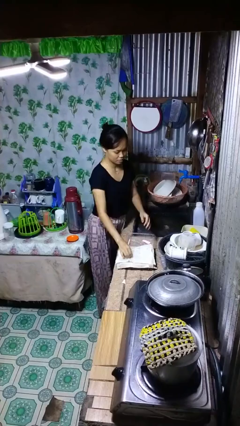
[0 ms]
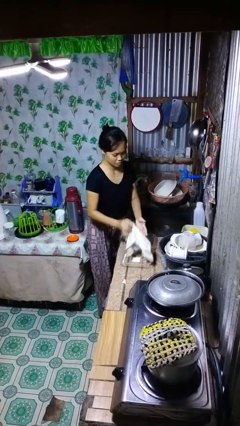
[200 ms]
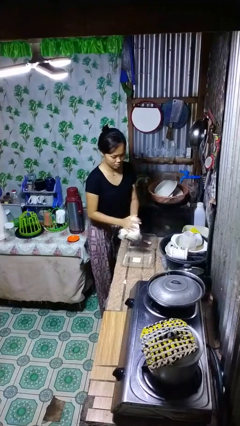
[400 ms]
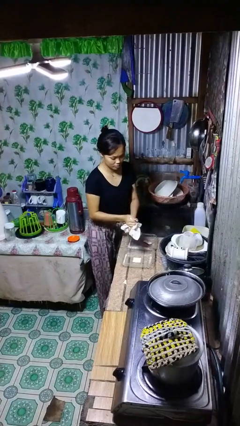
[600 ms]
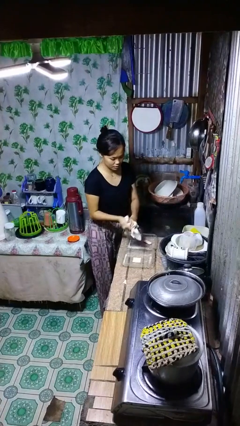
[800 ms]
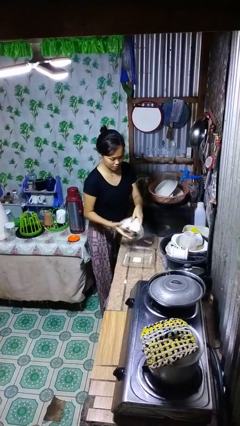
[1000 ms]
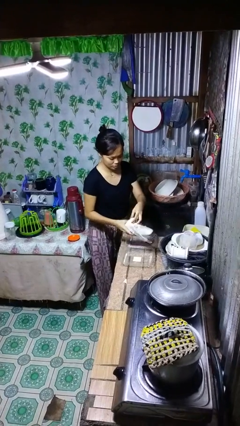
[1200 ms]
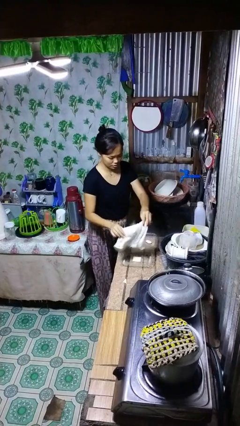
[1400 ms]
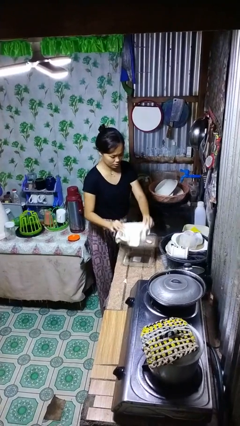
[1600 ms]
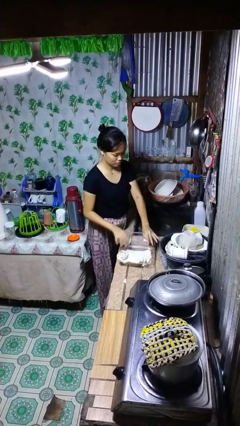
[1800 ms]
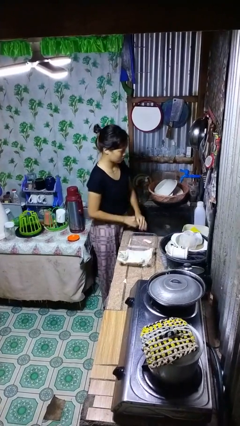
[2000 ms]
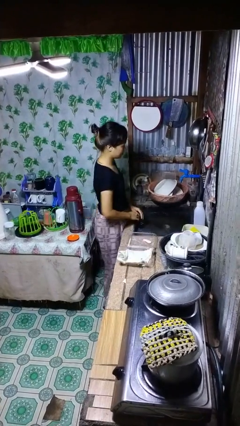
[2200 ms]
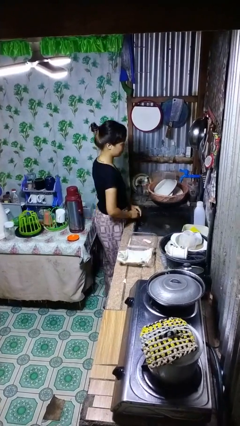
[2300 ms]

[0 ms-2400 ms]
person dries hands with towel

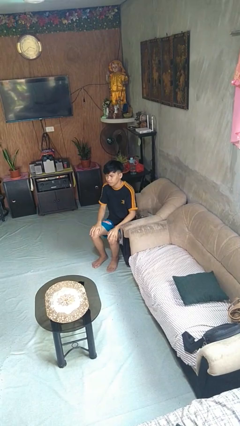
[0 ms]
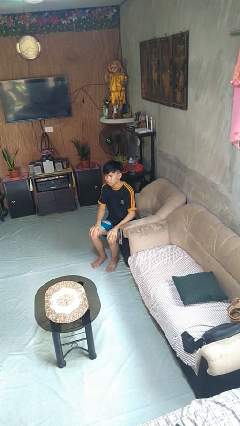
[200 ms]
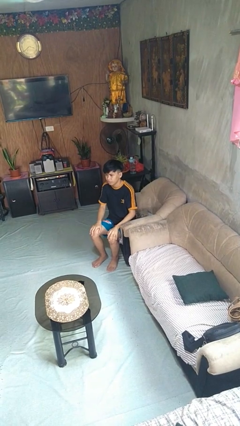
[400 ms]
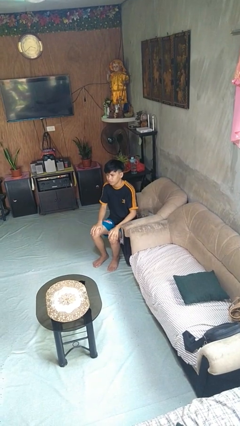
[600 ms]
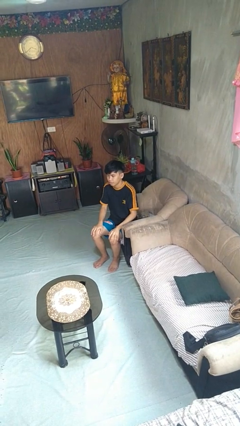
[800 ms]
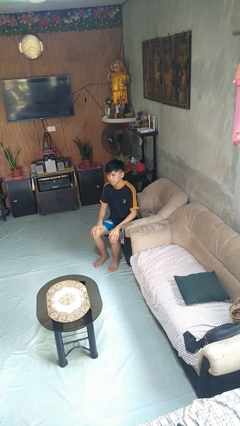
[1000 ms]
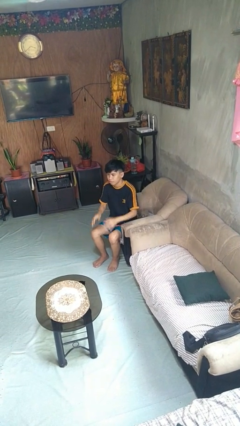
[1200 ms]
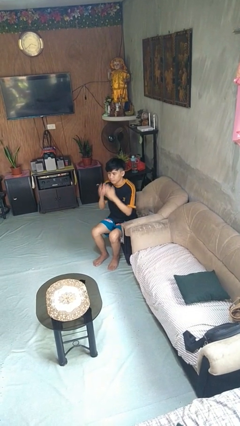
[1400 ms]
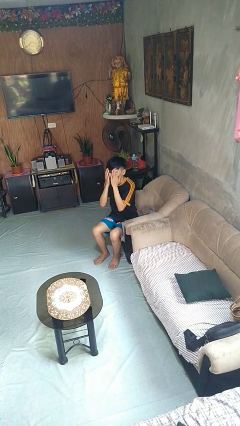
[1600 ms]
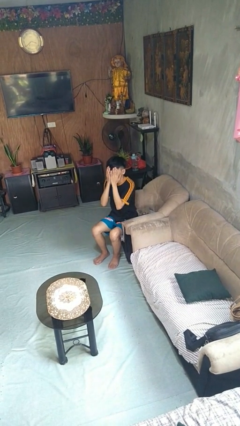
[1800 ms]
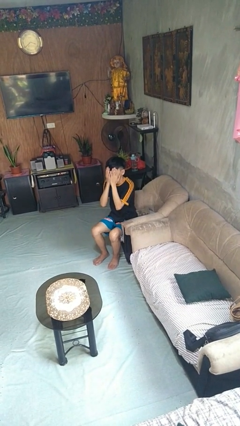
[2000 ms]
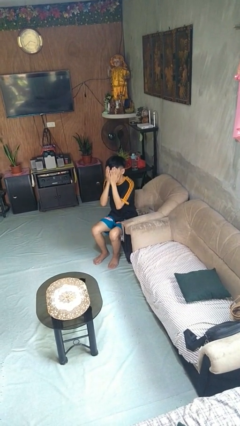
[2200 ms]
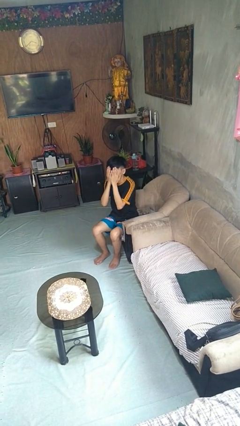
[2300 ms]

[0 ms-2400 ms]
person covers face with hands

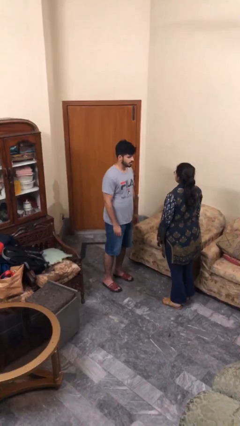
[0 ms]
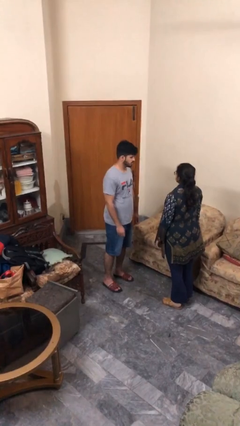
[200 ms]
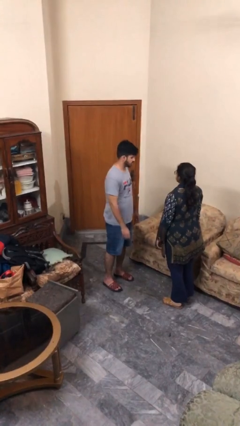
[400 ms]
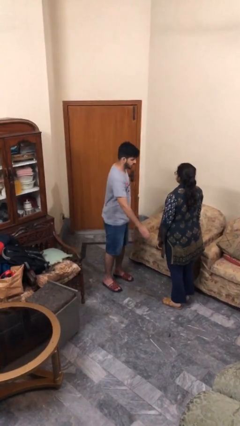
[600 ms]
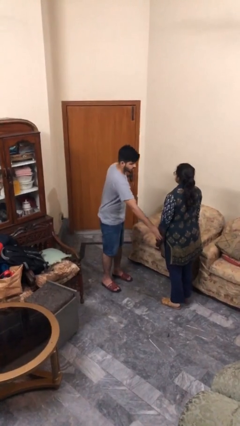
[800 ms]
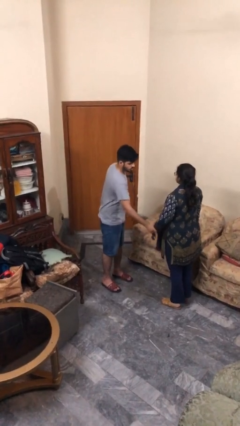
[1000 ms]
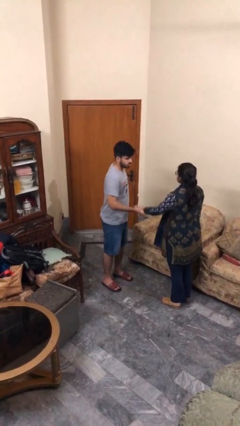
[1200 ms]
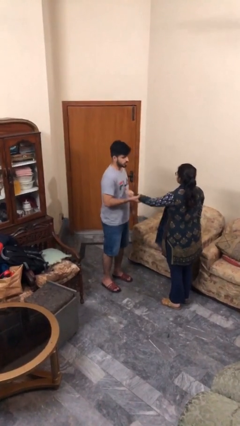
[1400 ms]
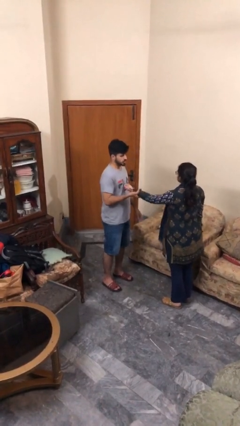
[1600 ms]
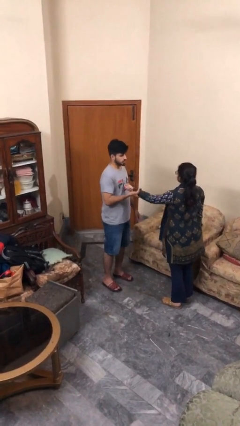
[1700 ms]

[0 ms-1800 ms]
person grabs person by forearm

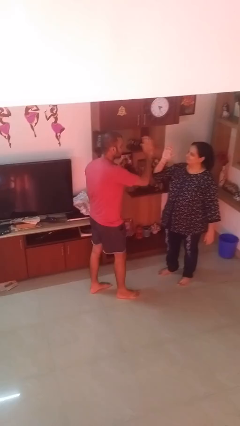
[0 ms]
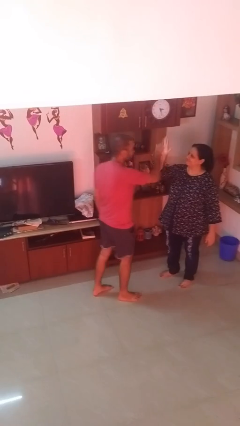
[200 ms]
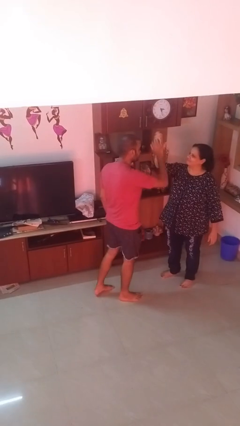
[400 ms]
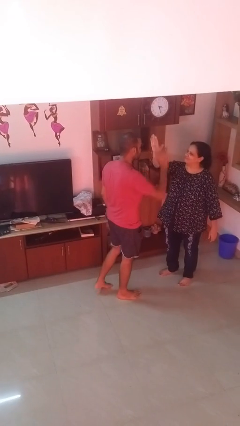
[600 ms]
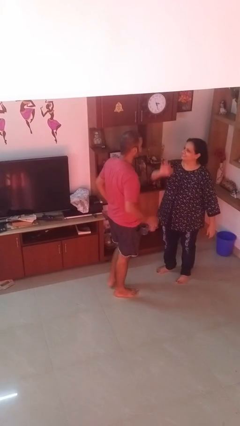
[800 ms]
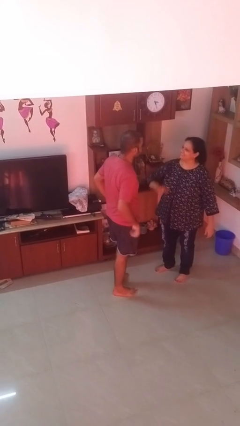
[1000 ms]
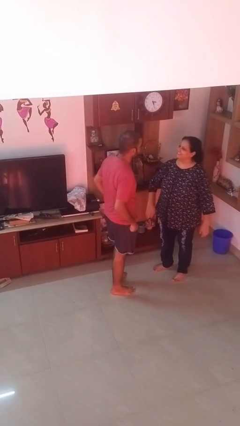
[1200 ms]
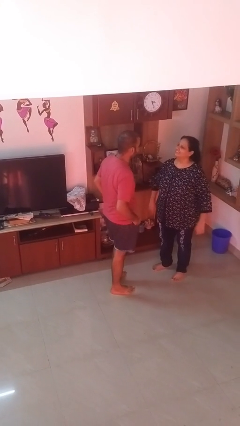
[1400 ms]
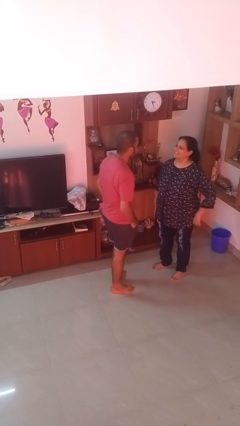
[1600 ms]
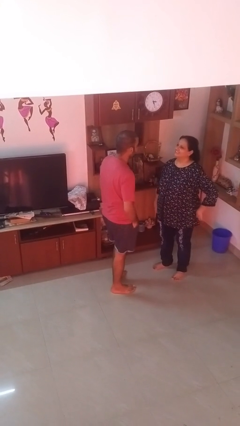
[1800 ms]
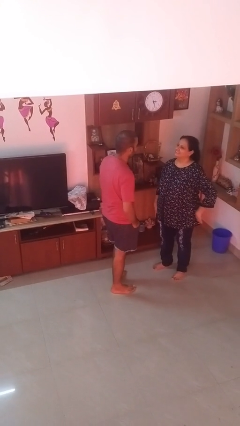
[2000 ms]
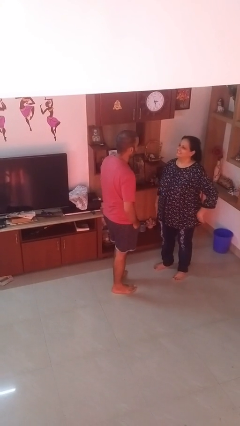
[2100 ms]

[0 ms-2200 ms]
person highfives hand

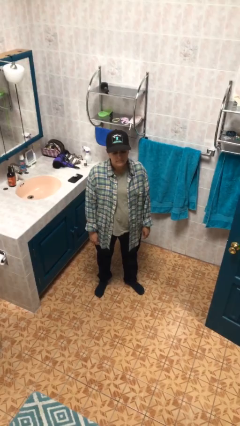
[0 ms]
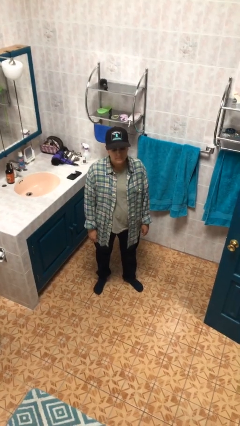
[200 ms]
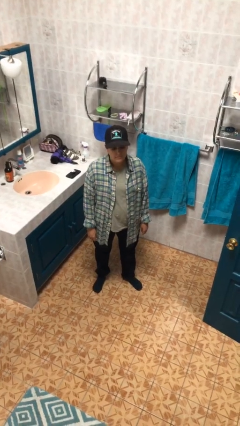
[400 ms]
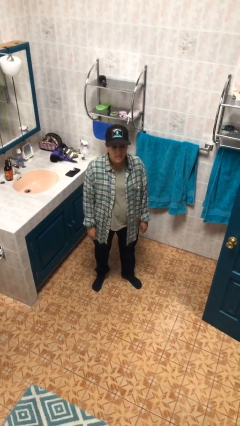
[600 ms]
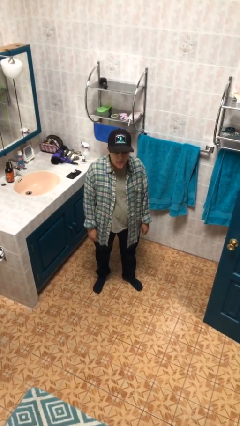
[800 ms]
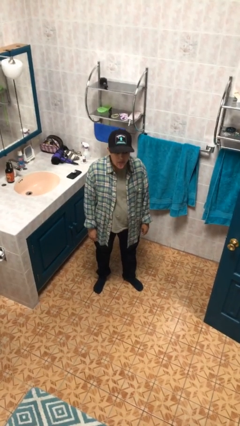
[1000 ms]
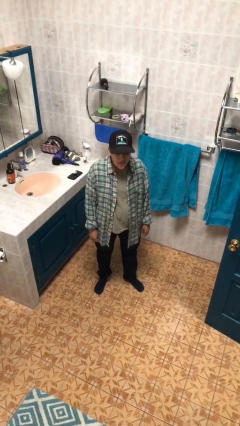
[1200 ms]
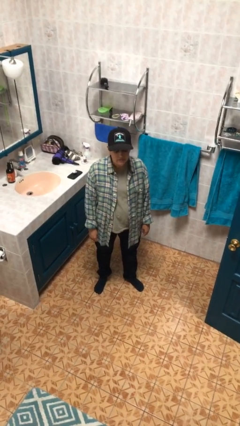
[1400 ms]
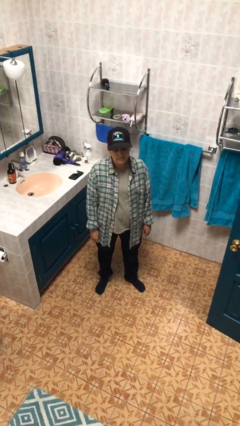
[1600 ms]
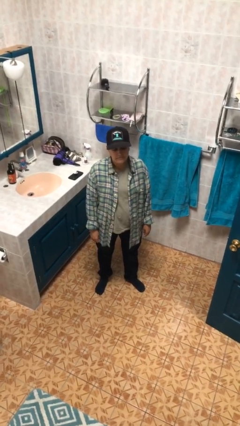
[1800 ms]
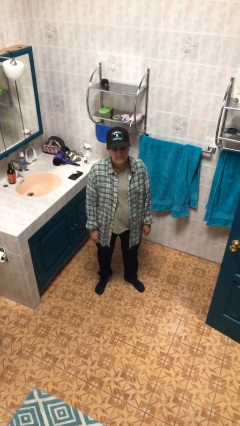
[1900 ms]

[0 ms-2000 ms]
person sticks out tongue

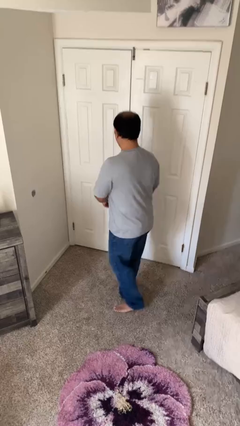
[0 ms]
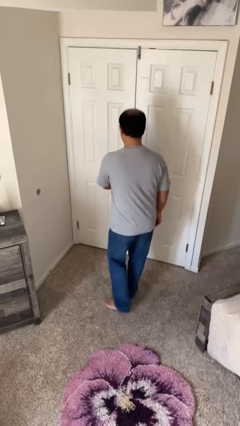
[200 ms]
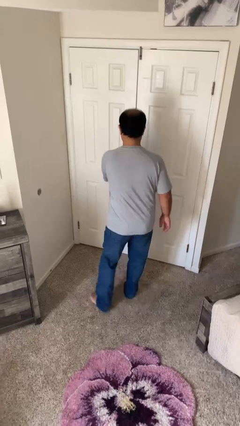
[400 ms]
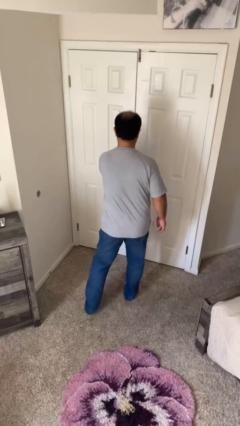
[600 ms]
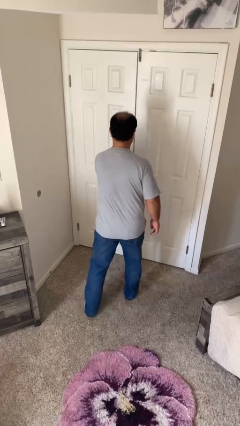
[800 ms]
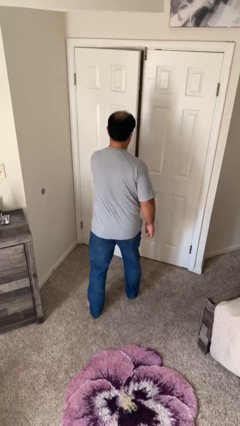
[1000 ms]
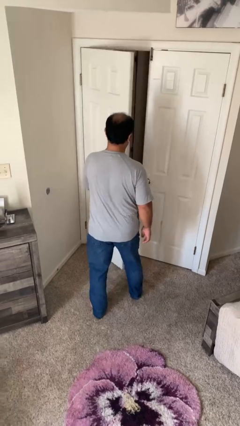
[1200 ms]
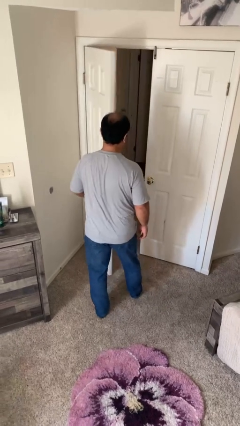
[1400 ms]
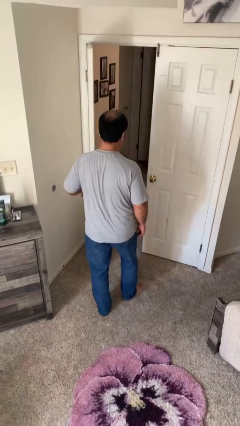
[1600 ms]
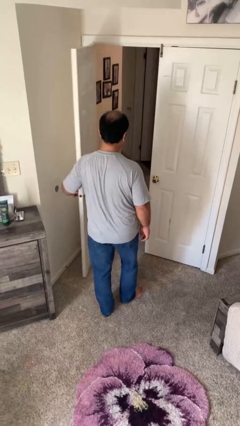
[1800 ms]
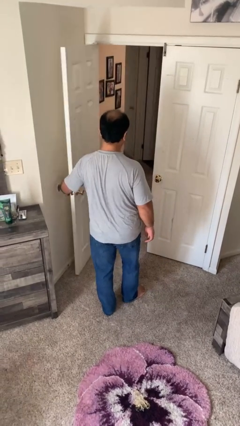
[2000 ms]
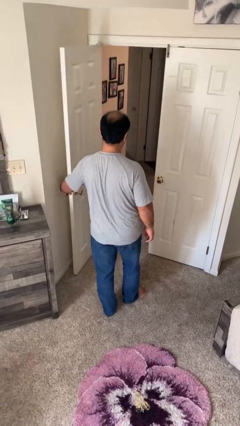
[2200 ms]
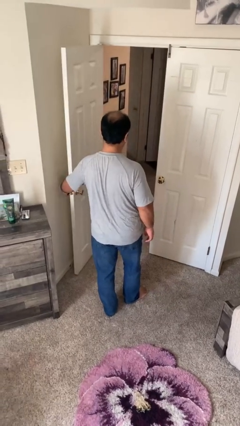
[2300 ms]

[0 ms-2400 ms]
person opens facility door

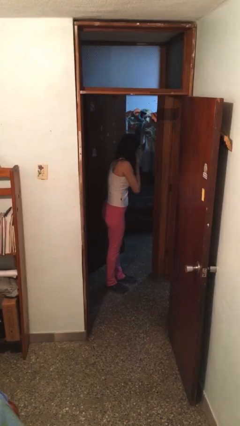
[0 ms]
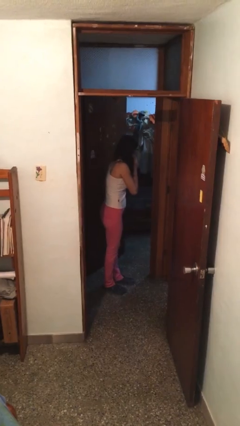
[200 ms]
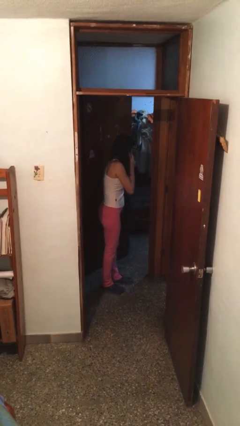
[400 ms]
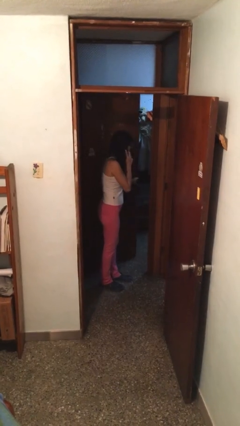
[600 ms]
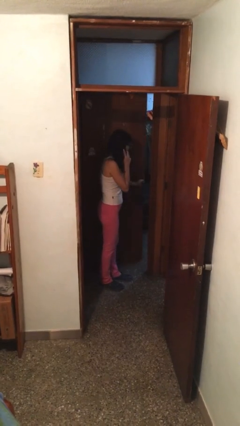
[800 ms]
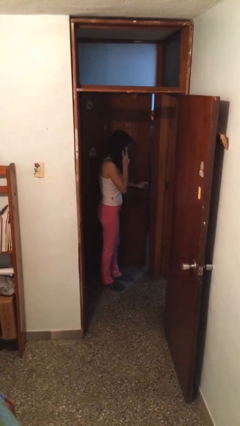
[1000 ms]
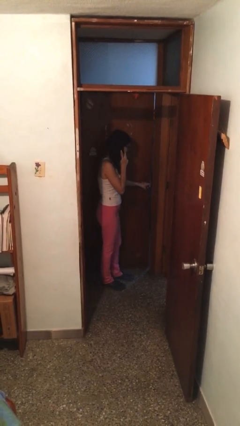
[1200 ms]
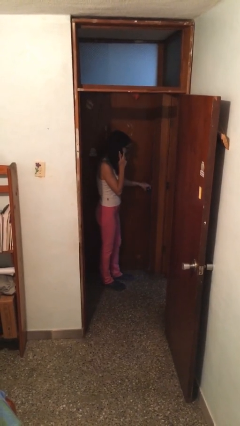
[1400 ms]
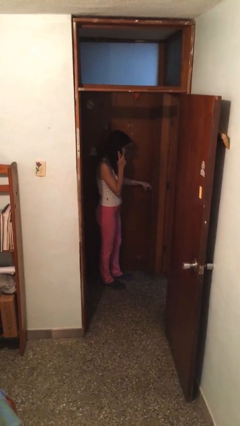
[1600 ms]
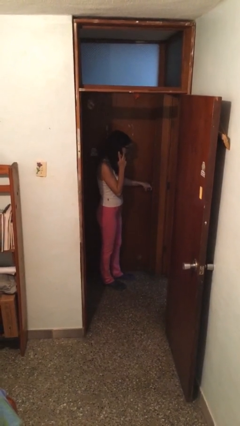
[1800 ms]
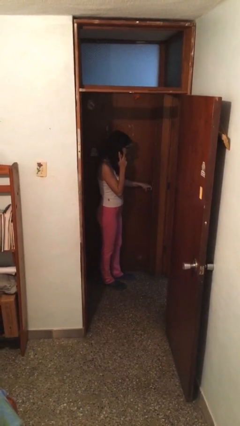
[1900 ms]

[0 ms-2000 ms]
person closes facility door

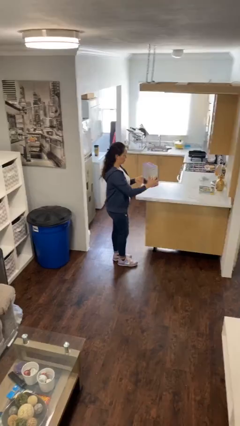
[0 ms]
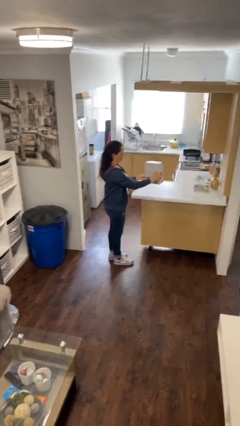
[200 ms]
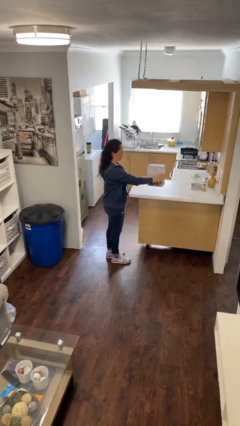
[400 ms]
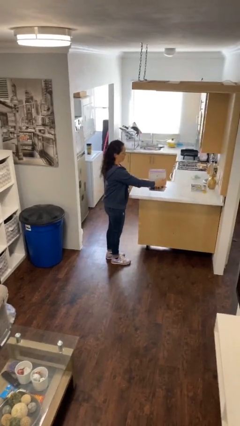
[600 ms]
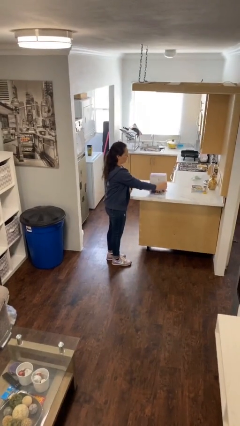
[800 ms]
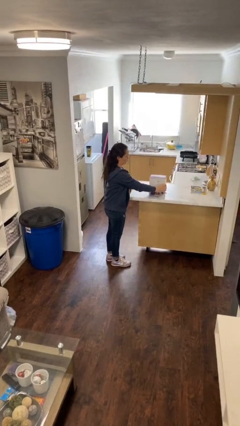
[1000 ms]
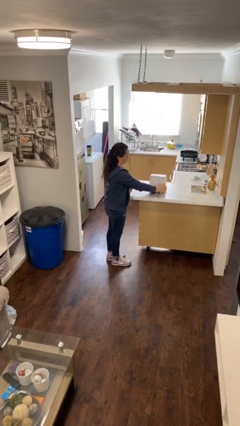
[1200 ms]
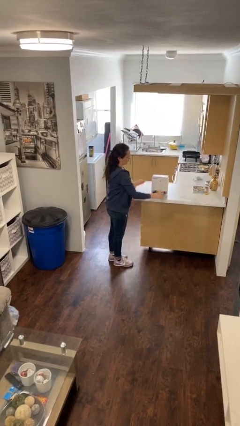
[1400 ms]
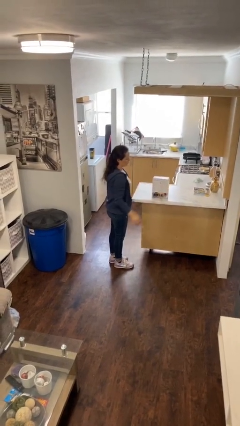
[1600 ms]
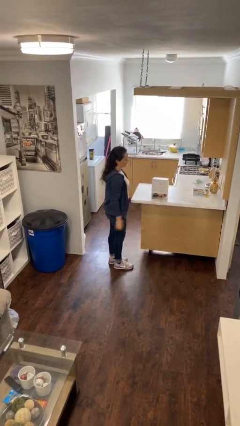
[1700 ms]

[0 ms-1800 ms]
person puts down object on table
